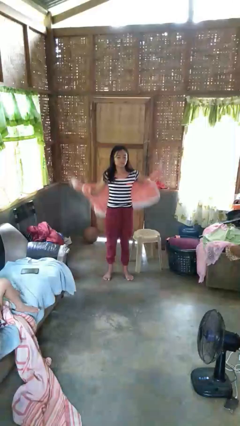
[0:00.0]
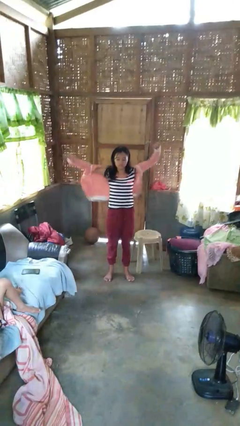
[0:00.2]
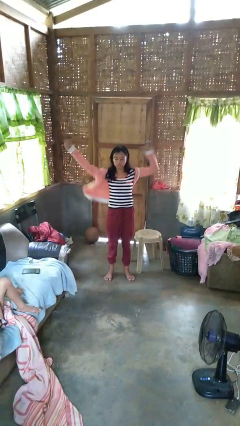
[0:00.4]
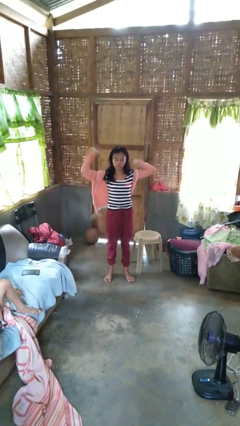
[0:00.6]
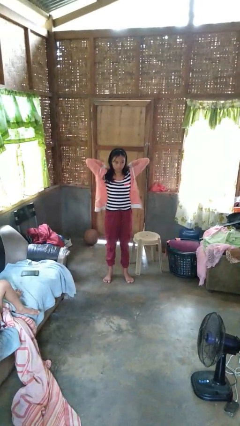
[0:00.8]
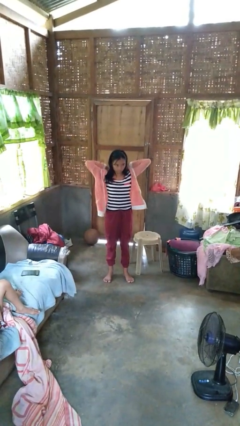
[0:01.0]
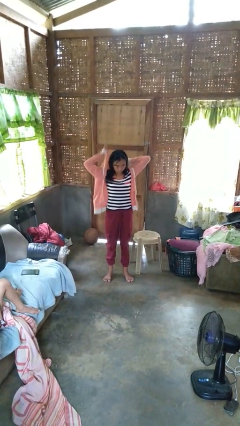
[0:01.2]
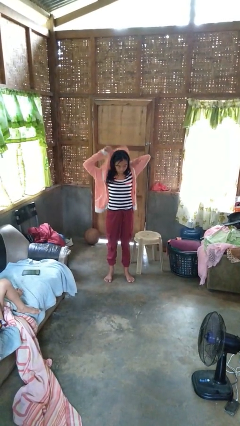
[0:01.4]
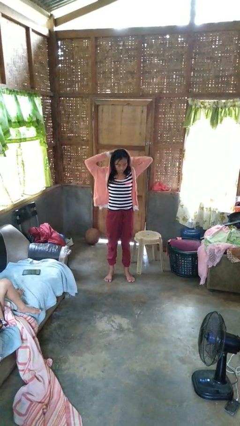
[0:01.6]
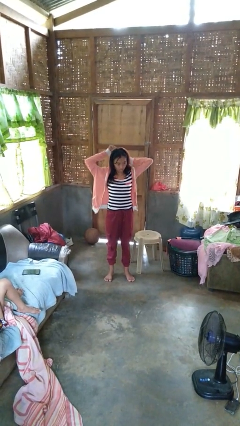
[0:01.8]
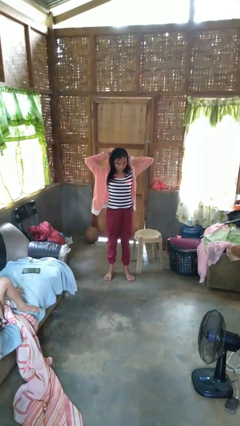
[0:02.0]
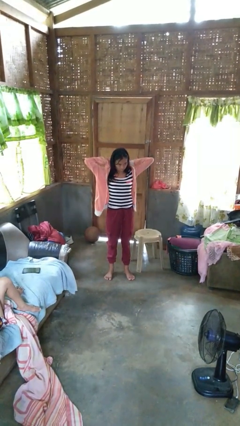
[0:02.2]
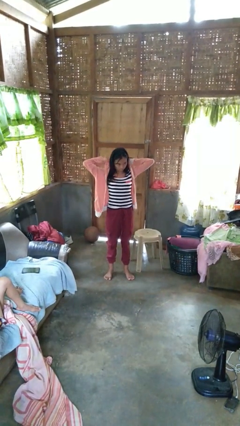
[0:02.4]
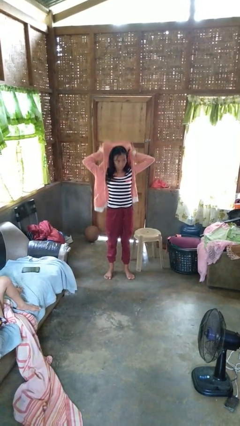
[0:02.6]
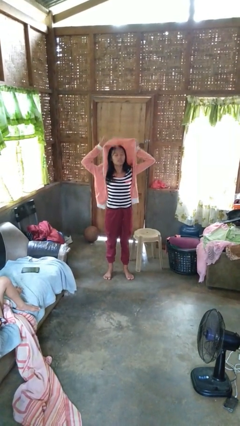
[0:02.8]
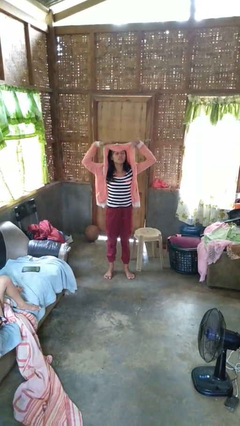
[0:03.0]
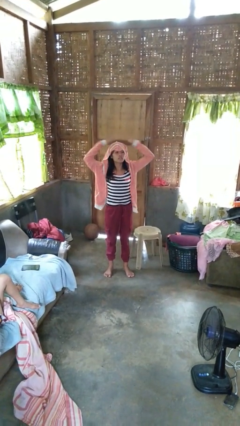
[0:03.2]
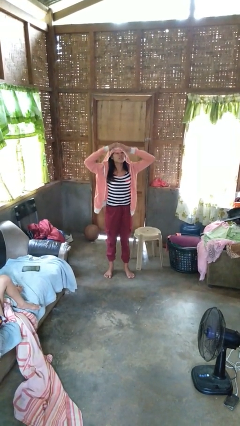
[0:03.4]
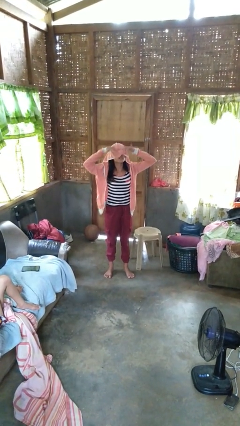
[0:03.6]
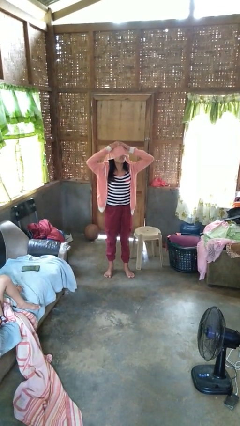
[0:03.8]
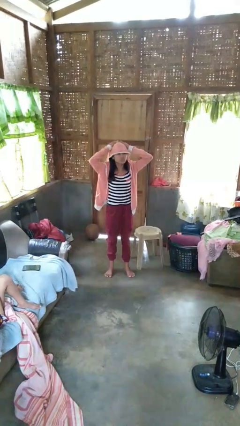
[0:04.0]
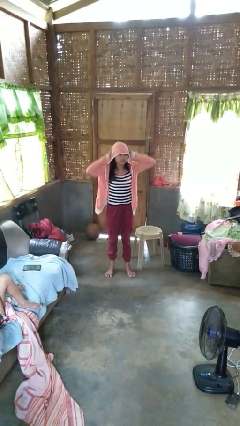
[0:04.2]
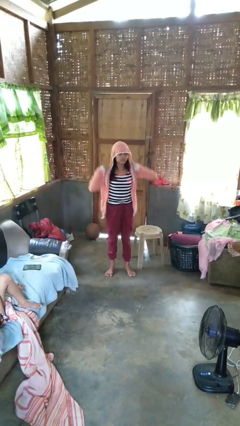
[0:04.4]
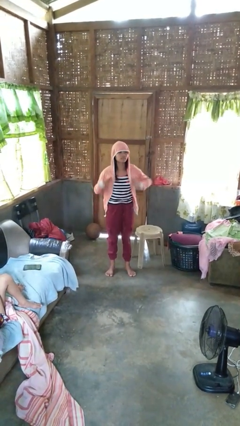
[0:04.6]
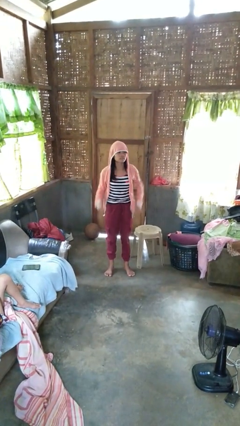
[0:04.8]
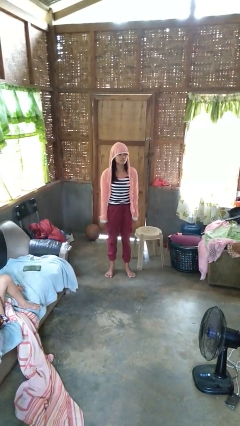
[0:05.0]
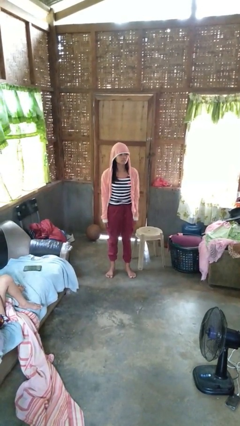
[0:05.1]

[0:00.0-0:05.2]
person puts on hoodie

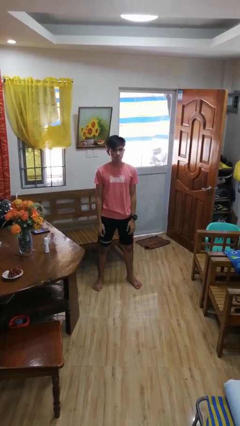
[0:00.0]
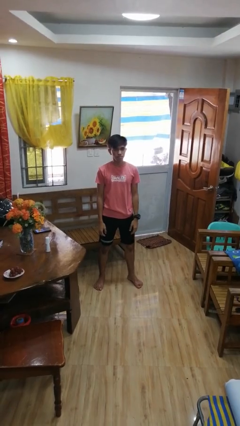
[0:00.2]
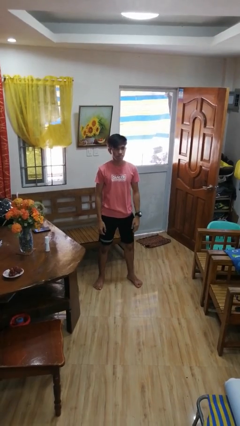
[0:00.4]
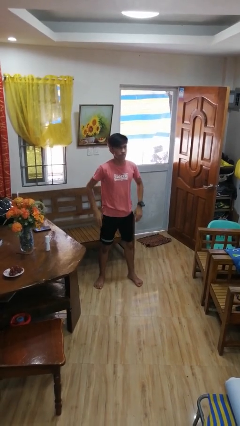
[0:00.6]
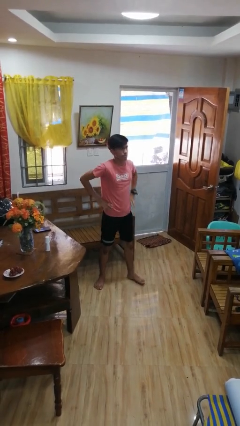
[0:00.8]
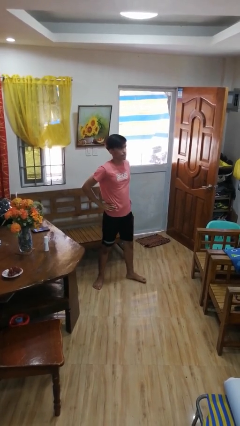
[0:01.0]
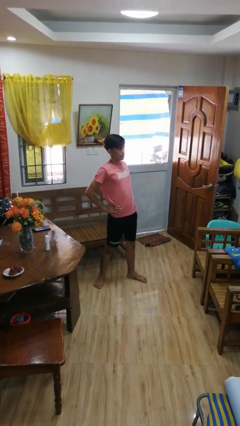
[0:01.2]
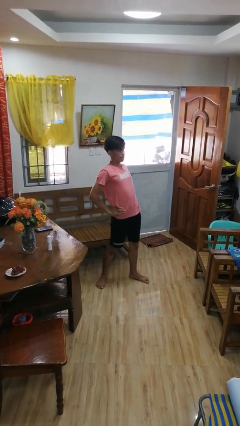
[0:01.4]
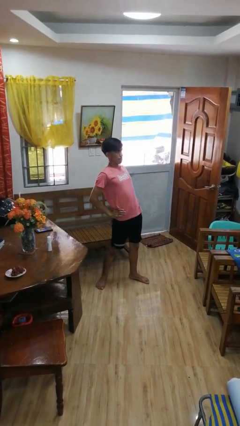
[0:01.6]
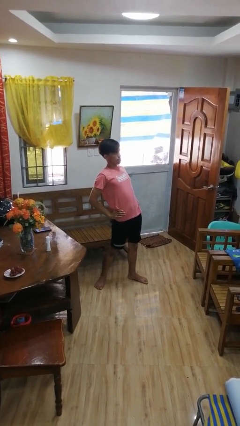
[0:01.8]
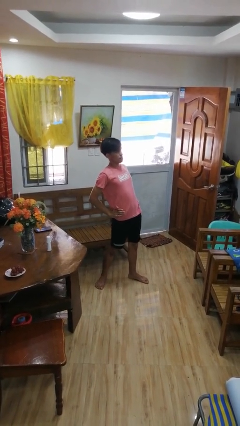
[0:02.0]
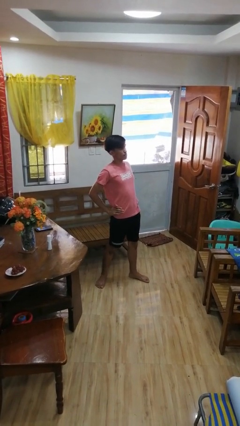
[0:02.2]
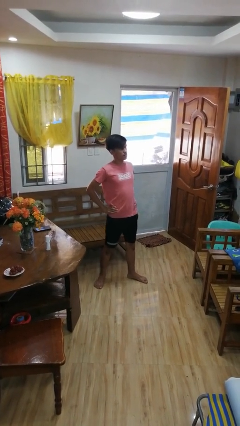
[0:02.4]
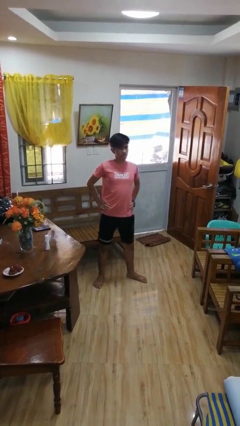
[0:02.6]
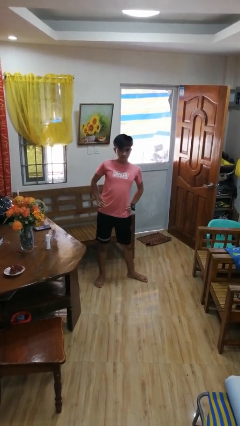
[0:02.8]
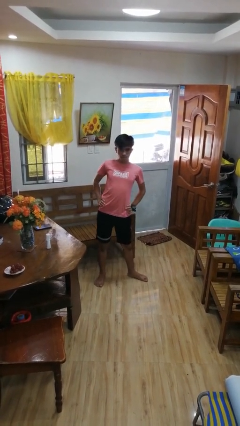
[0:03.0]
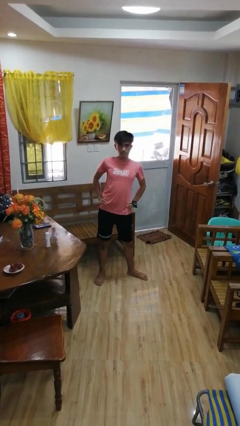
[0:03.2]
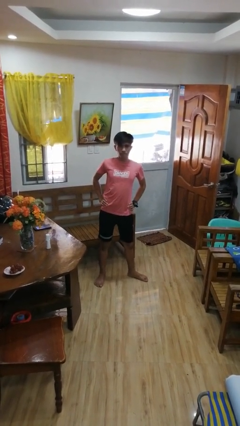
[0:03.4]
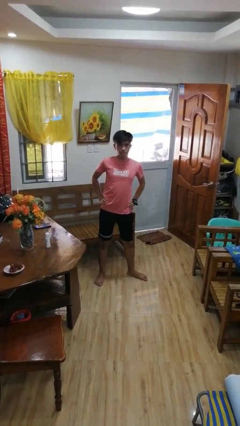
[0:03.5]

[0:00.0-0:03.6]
person stretches back

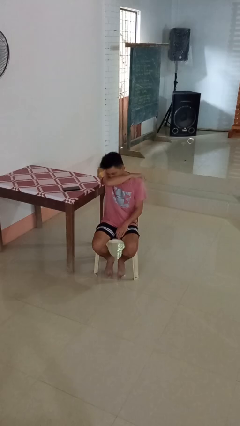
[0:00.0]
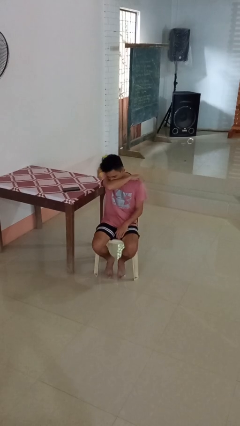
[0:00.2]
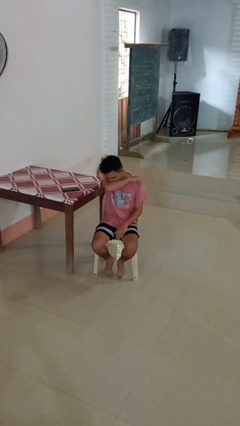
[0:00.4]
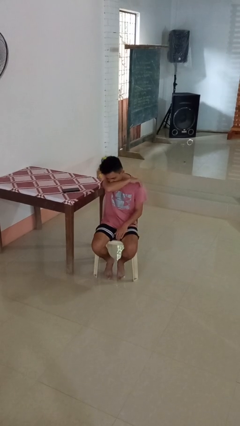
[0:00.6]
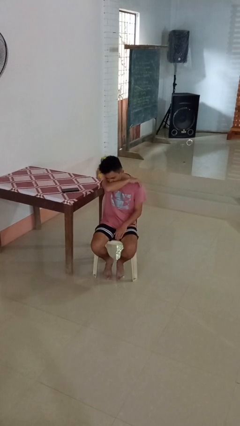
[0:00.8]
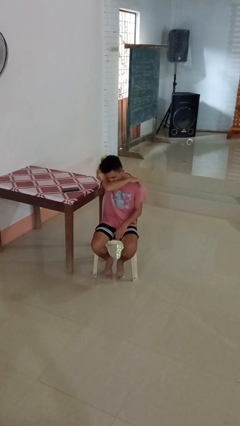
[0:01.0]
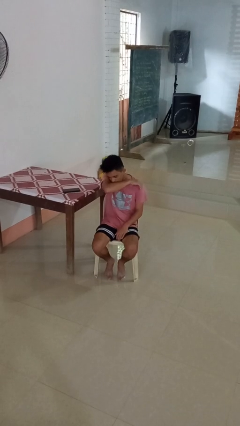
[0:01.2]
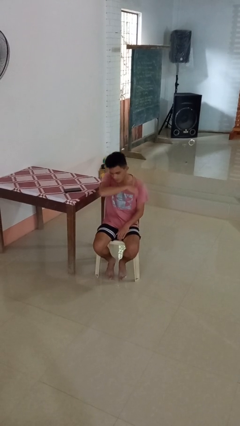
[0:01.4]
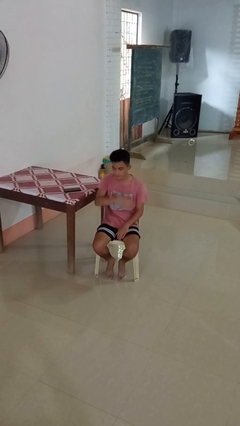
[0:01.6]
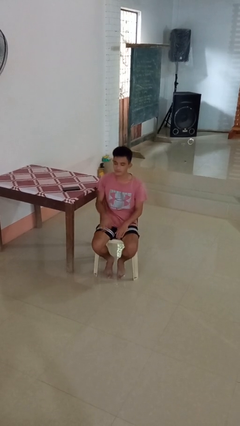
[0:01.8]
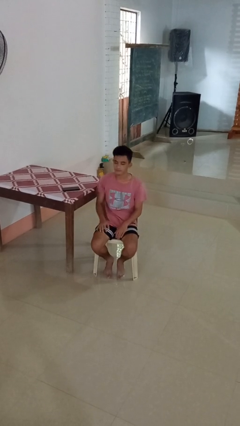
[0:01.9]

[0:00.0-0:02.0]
person sneezes into arm

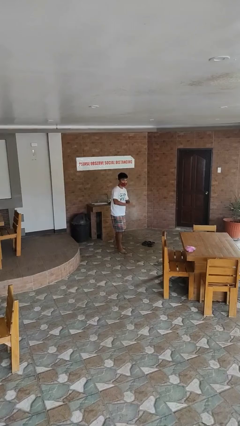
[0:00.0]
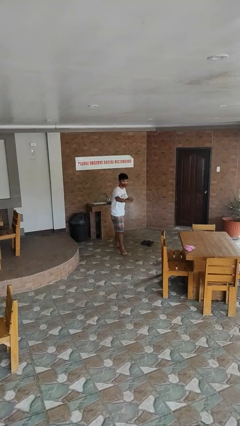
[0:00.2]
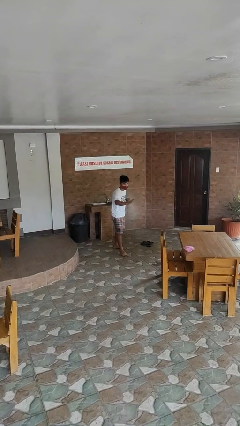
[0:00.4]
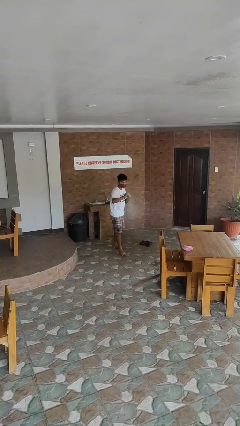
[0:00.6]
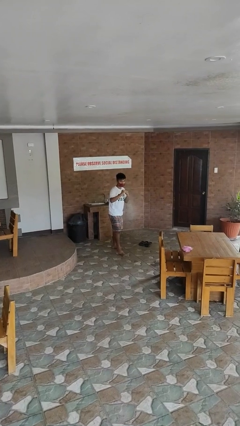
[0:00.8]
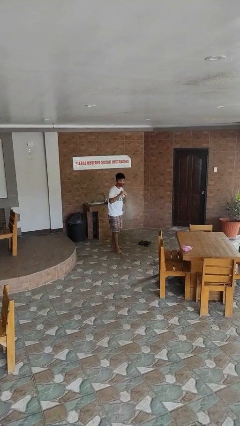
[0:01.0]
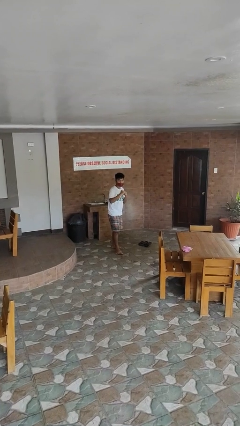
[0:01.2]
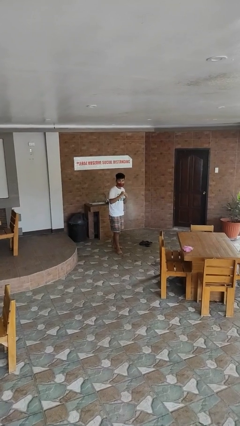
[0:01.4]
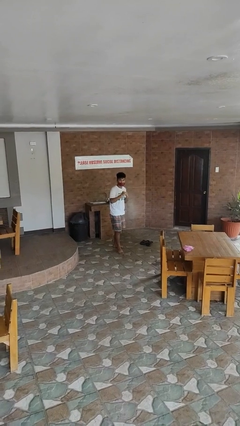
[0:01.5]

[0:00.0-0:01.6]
person karate chop

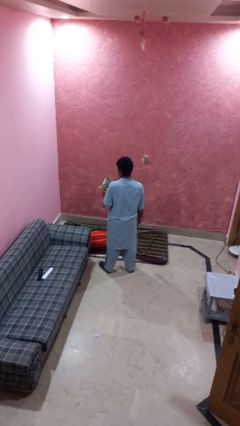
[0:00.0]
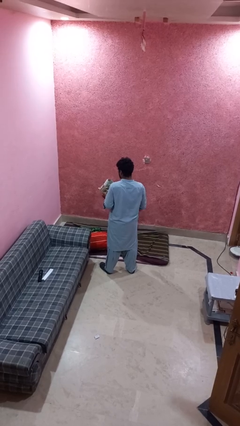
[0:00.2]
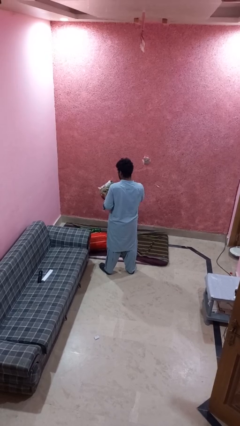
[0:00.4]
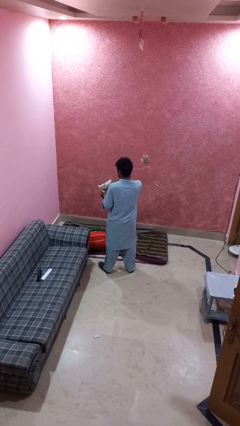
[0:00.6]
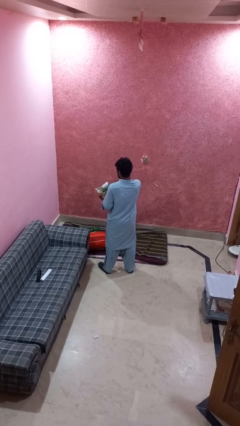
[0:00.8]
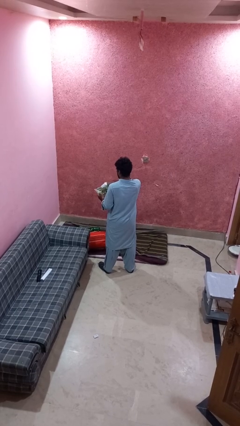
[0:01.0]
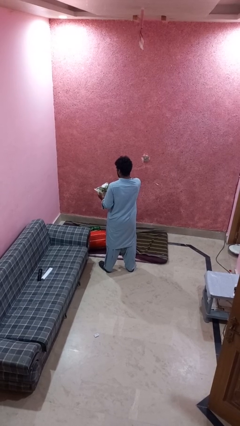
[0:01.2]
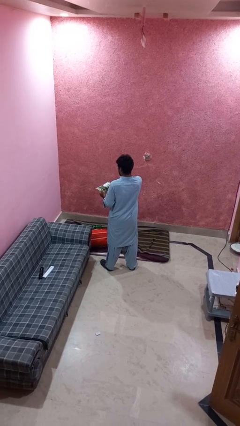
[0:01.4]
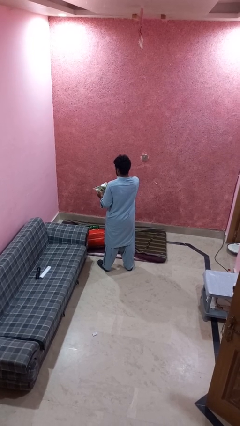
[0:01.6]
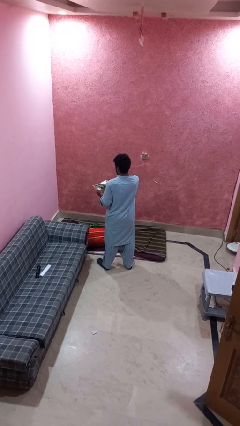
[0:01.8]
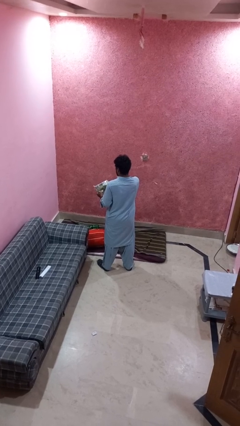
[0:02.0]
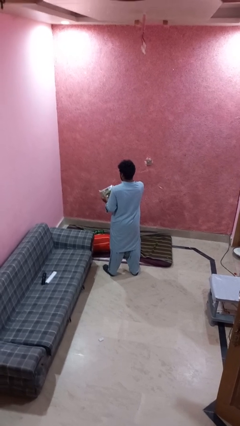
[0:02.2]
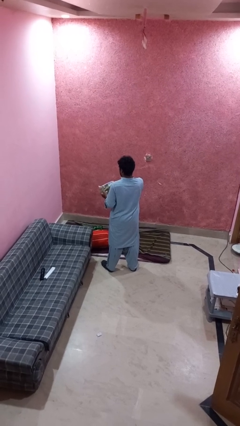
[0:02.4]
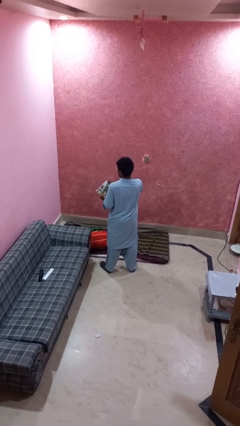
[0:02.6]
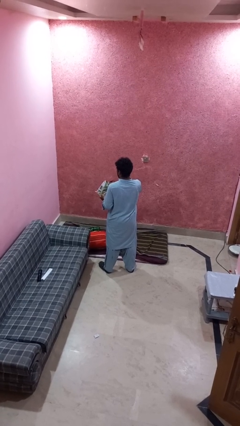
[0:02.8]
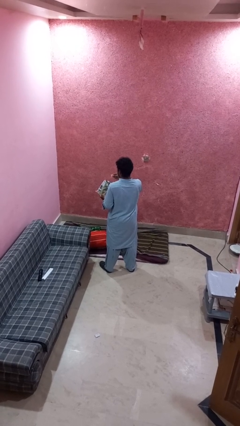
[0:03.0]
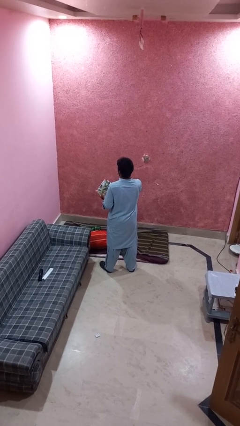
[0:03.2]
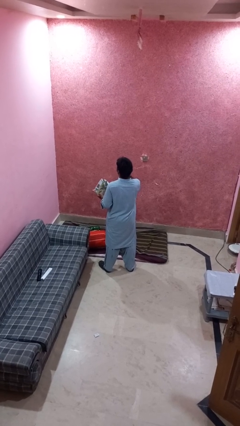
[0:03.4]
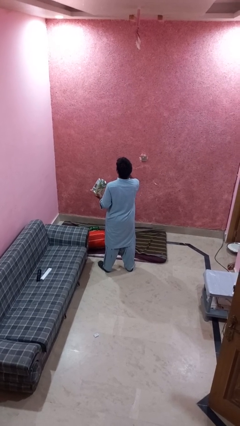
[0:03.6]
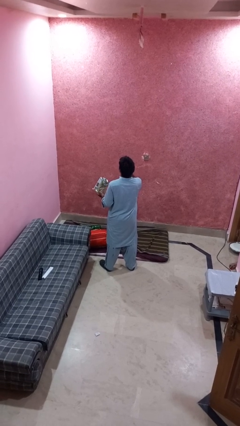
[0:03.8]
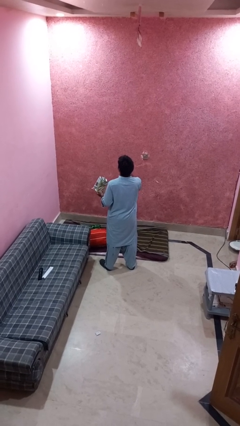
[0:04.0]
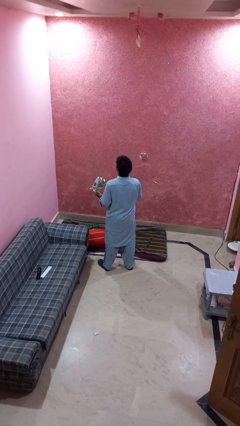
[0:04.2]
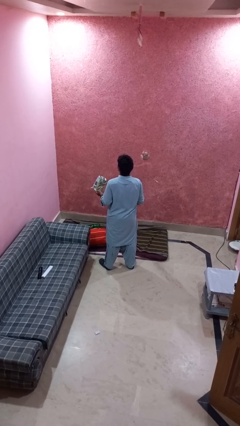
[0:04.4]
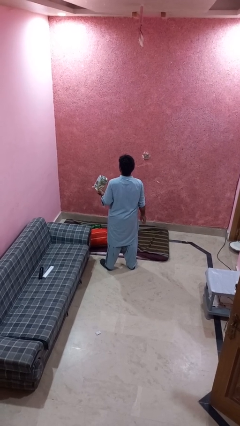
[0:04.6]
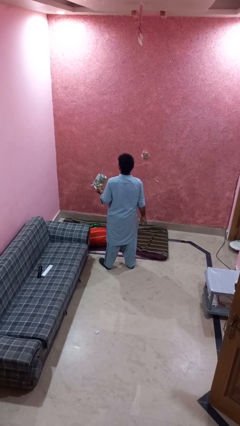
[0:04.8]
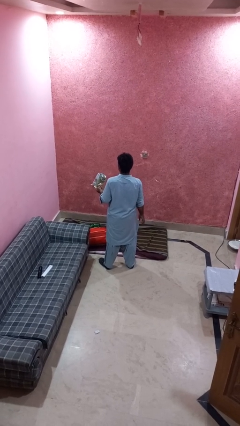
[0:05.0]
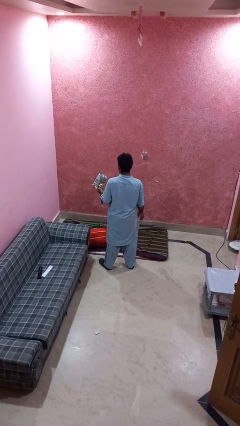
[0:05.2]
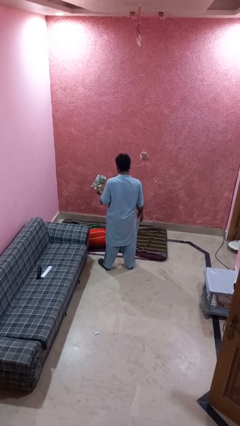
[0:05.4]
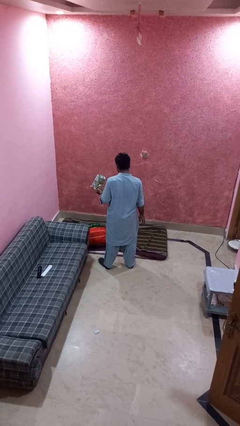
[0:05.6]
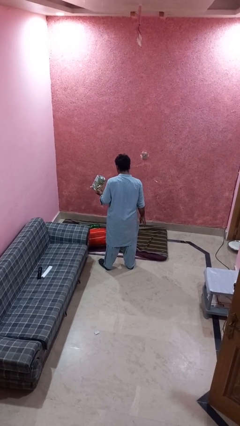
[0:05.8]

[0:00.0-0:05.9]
person eats snack from bag
